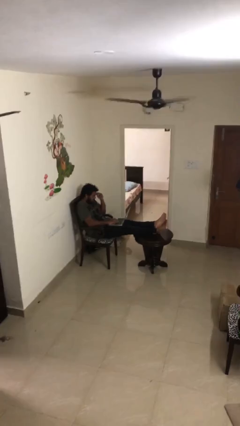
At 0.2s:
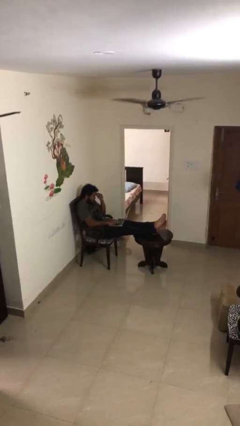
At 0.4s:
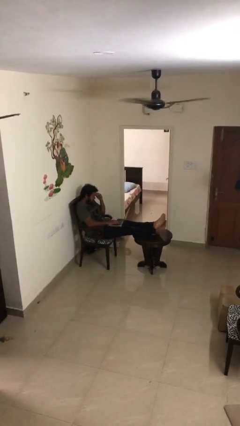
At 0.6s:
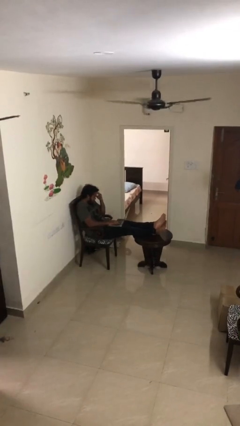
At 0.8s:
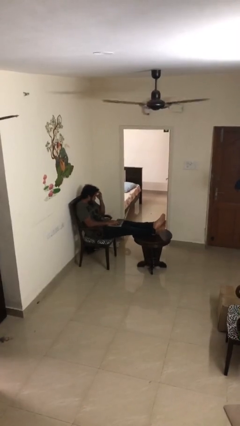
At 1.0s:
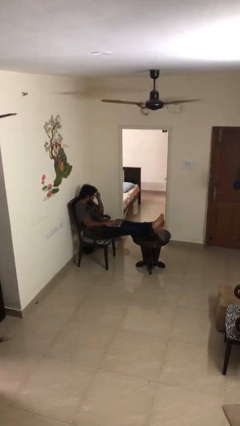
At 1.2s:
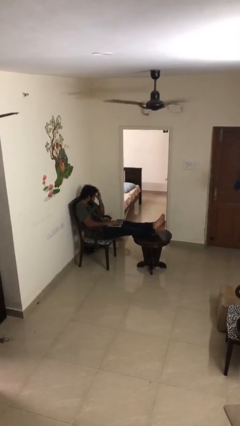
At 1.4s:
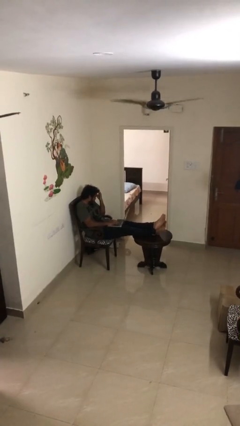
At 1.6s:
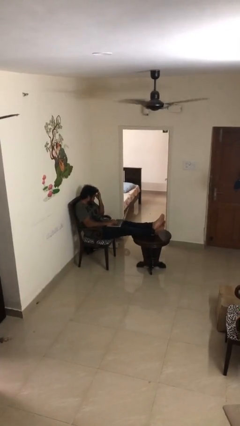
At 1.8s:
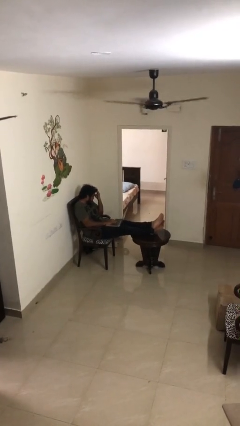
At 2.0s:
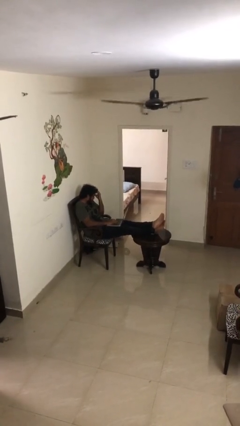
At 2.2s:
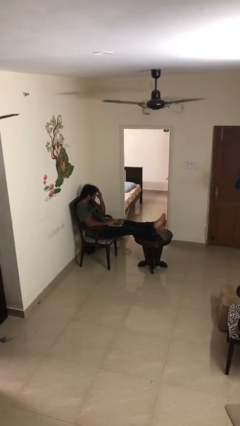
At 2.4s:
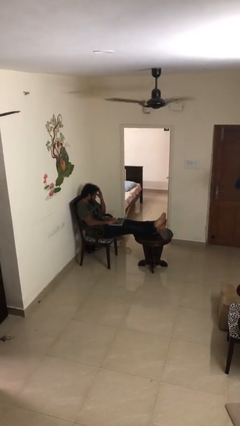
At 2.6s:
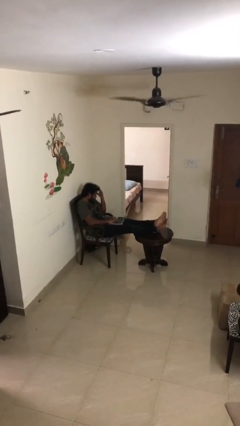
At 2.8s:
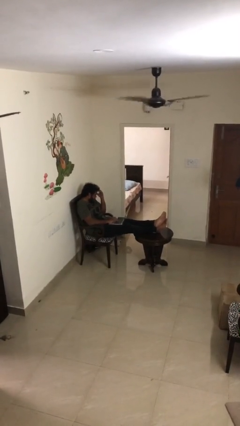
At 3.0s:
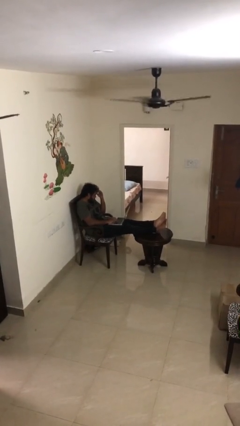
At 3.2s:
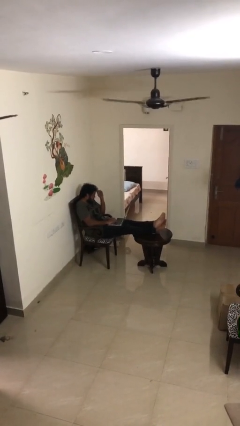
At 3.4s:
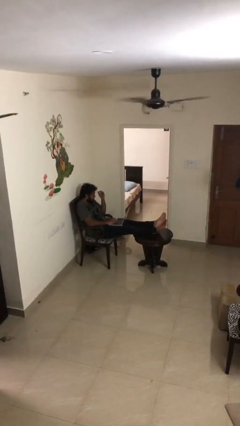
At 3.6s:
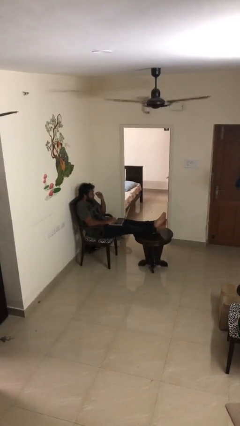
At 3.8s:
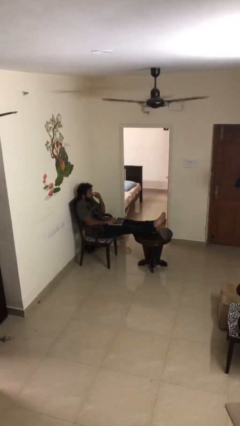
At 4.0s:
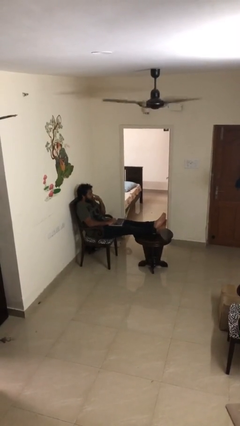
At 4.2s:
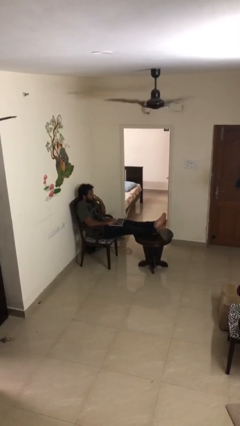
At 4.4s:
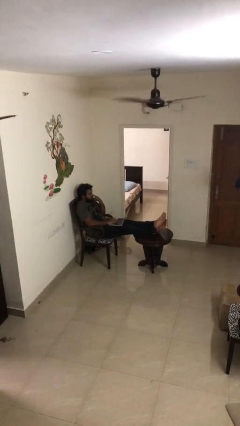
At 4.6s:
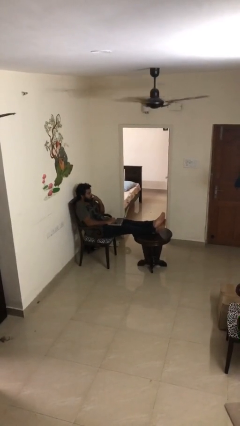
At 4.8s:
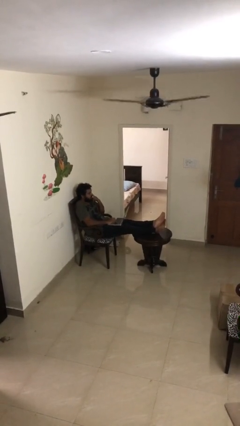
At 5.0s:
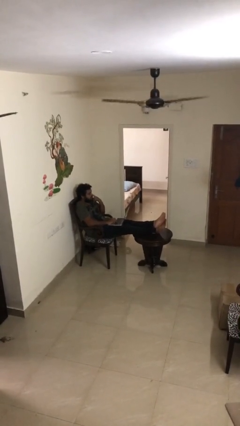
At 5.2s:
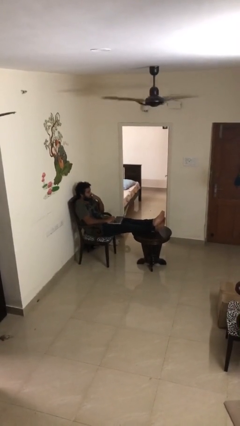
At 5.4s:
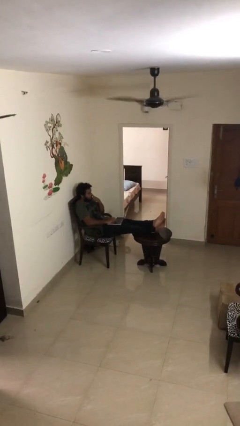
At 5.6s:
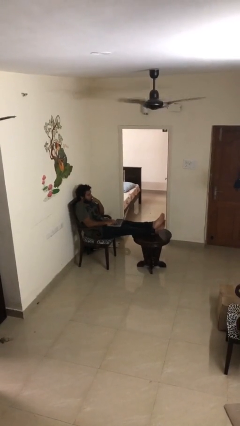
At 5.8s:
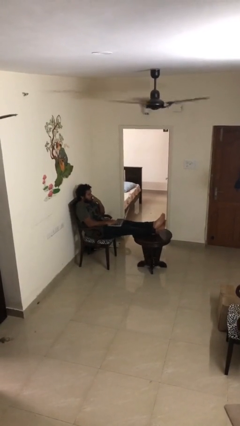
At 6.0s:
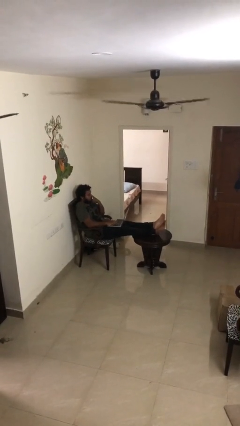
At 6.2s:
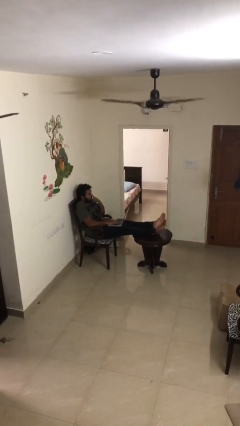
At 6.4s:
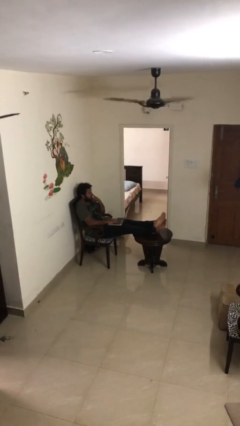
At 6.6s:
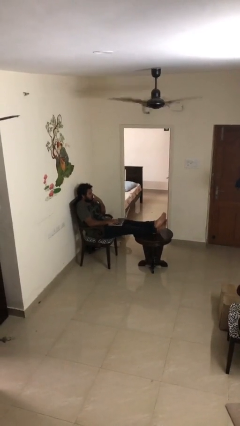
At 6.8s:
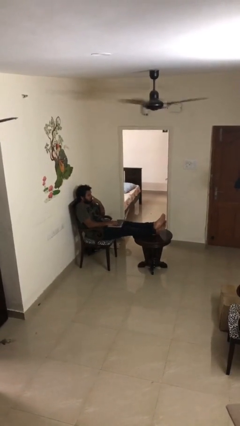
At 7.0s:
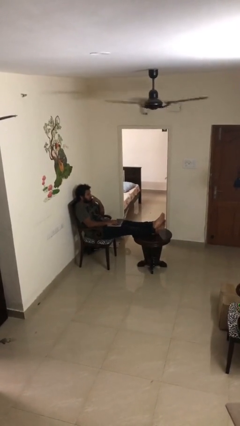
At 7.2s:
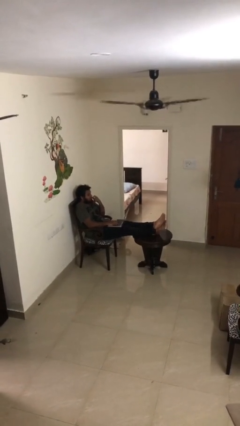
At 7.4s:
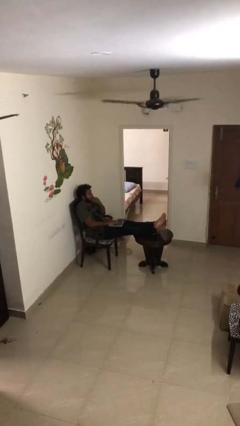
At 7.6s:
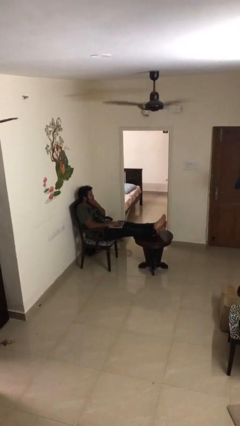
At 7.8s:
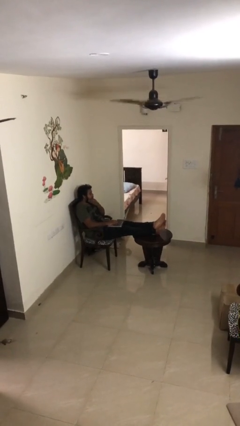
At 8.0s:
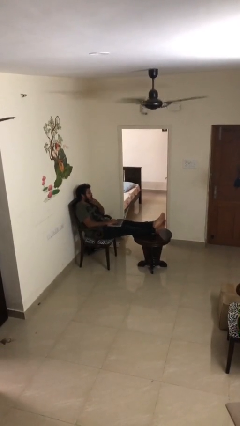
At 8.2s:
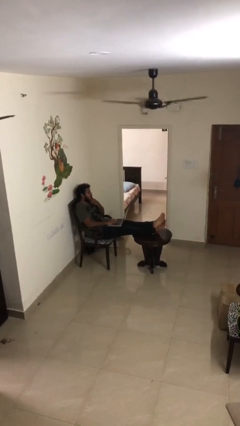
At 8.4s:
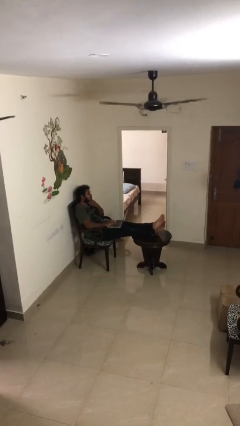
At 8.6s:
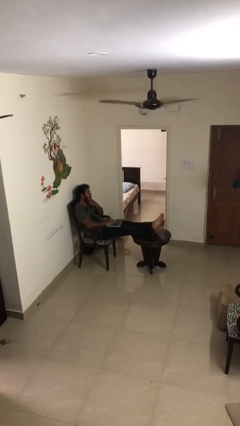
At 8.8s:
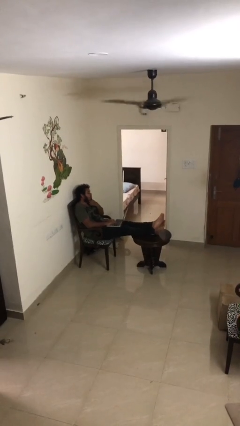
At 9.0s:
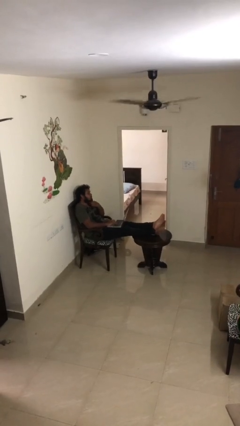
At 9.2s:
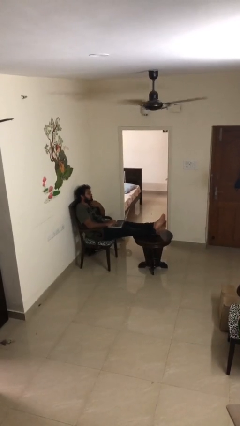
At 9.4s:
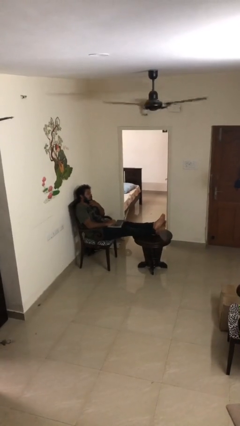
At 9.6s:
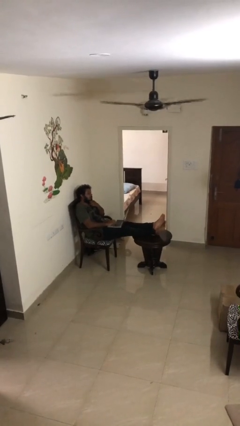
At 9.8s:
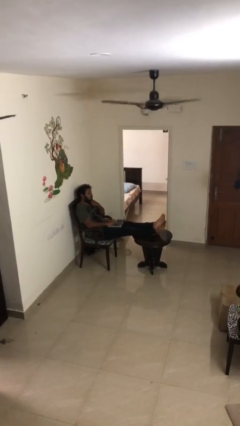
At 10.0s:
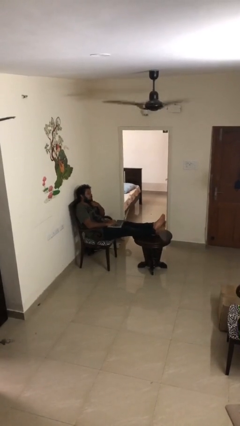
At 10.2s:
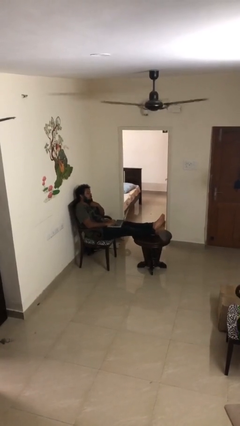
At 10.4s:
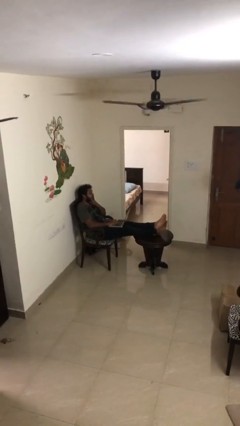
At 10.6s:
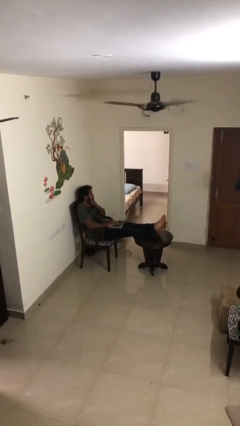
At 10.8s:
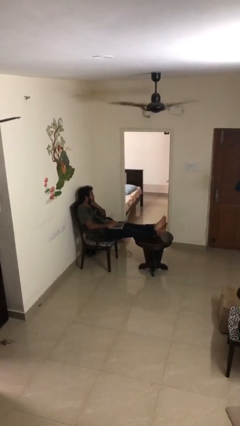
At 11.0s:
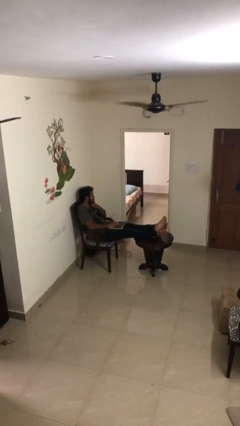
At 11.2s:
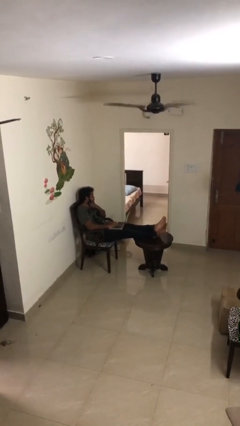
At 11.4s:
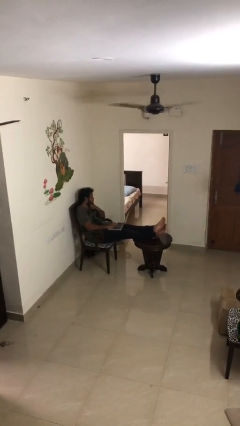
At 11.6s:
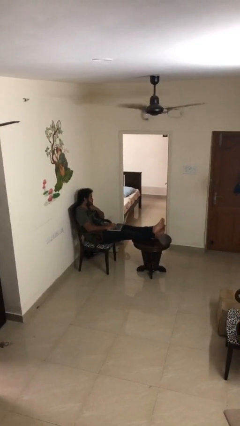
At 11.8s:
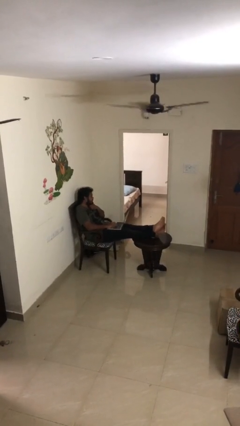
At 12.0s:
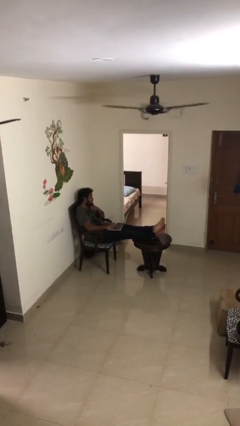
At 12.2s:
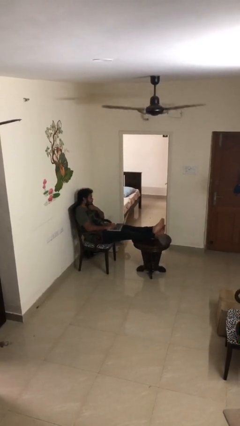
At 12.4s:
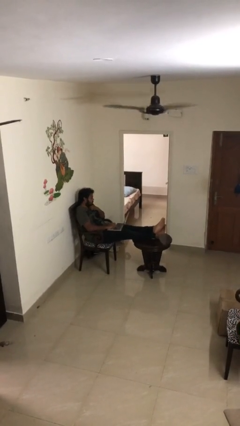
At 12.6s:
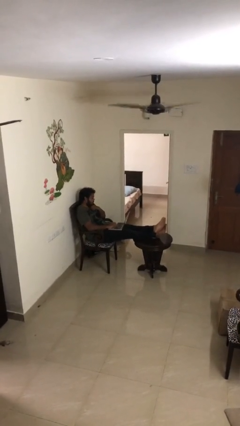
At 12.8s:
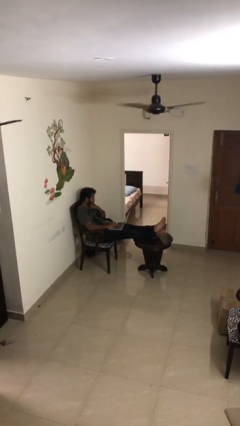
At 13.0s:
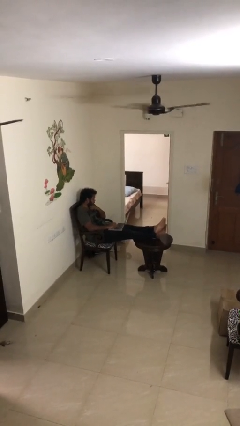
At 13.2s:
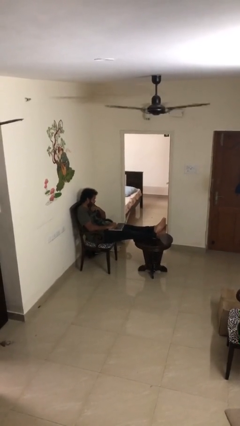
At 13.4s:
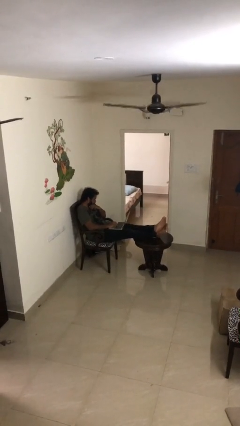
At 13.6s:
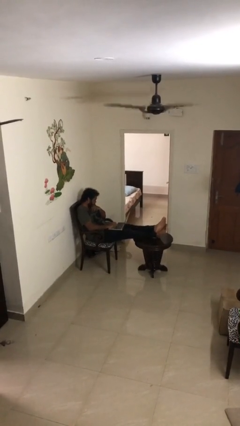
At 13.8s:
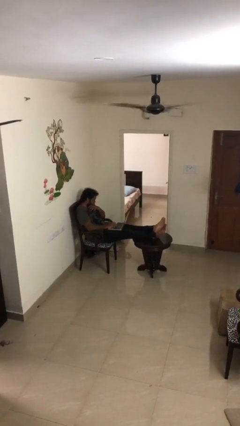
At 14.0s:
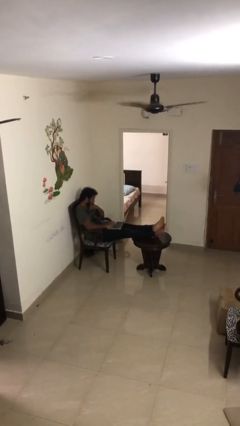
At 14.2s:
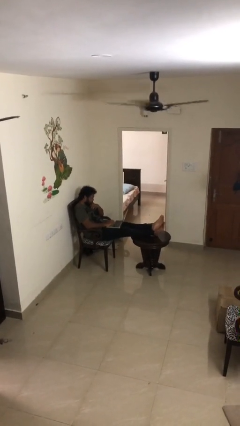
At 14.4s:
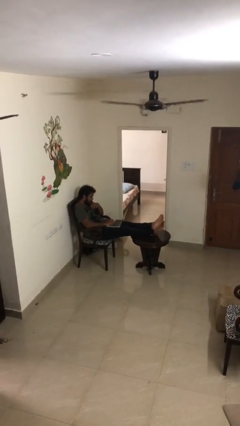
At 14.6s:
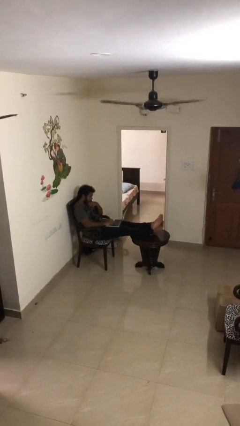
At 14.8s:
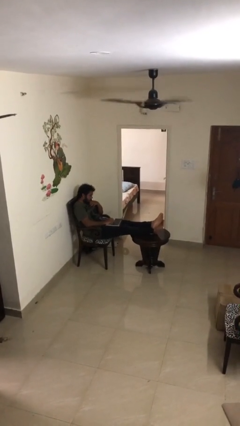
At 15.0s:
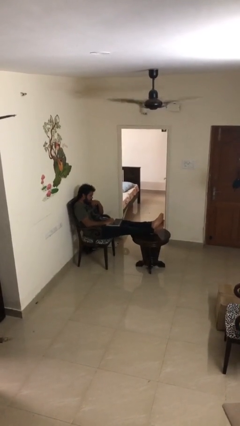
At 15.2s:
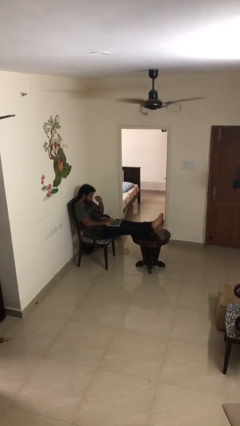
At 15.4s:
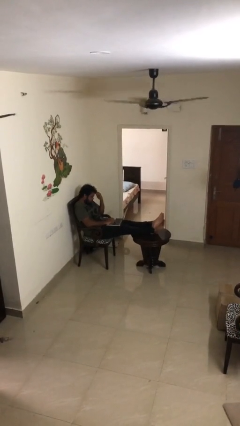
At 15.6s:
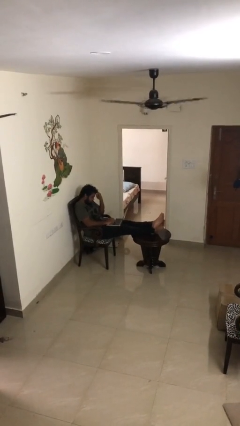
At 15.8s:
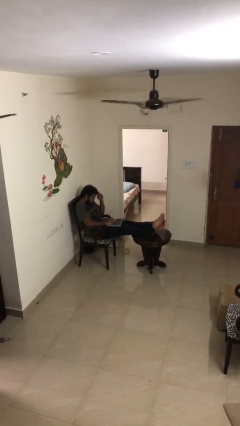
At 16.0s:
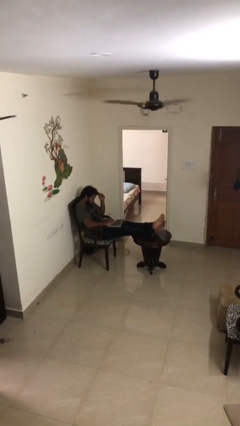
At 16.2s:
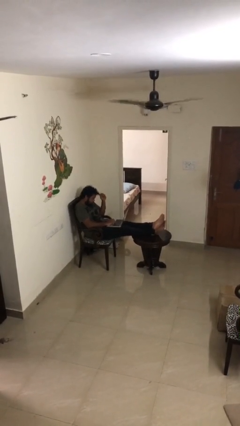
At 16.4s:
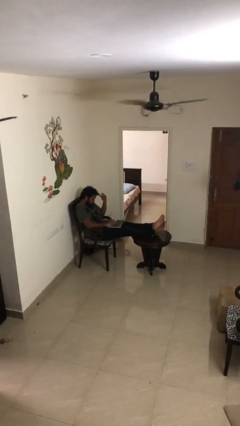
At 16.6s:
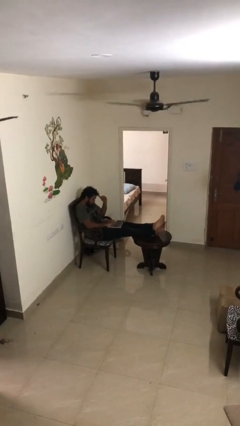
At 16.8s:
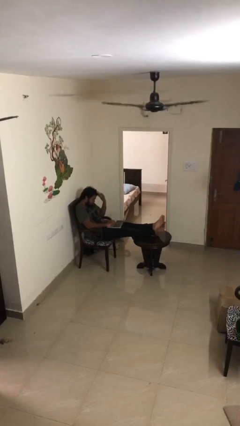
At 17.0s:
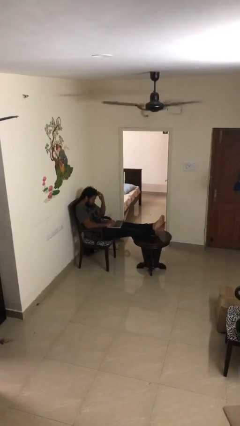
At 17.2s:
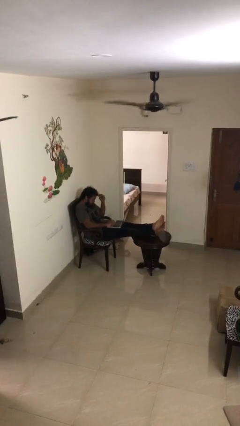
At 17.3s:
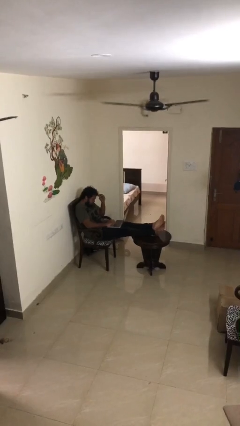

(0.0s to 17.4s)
person interacts with laptop

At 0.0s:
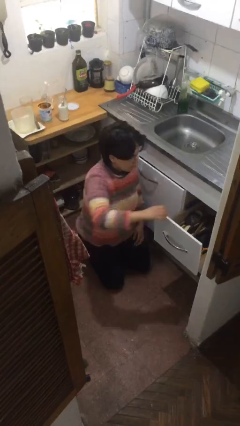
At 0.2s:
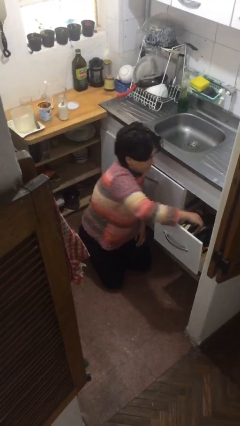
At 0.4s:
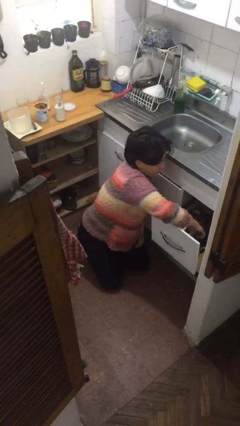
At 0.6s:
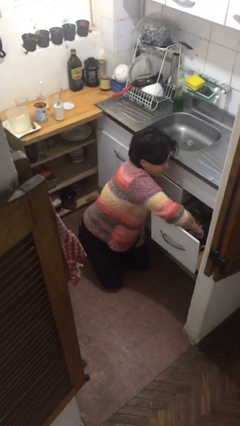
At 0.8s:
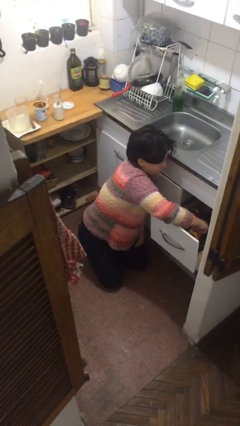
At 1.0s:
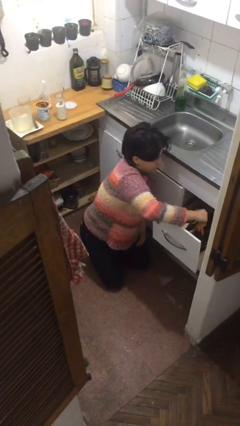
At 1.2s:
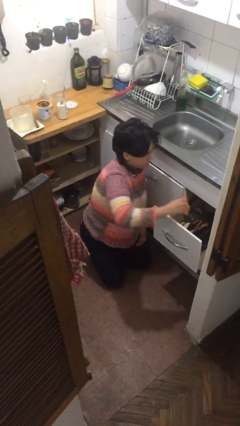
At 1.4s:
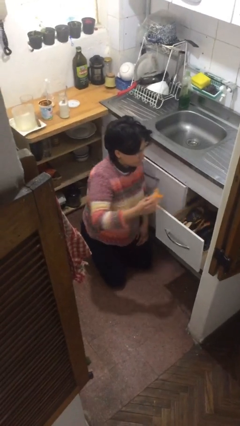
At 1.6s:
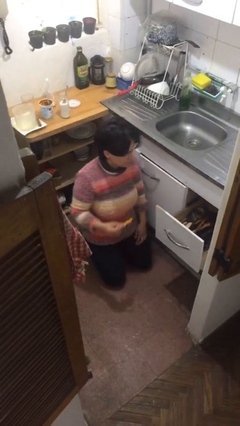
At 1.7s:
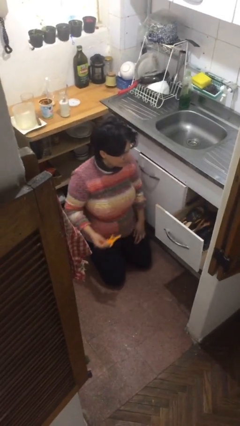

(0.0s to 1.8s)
person takes object from kitchen drawer
